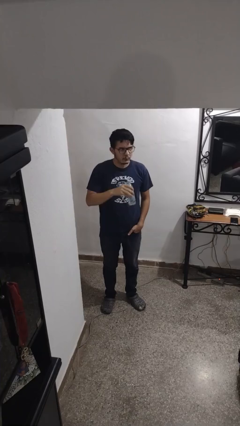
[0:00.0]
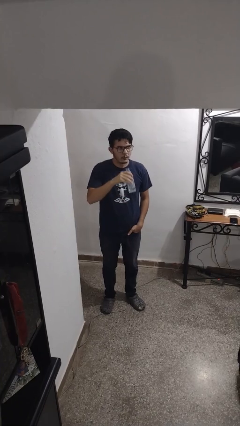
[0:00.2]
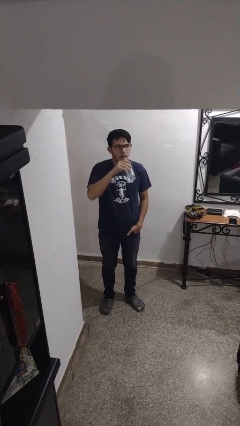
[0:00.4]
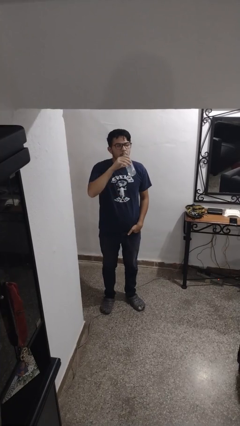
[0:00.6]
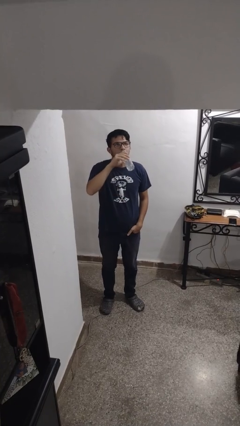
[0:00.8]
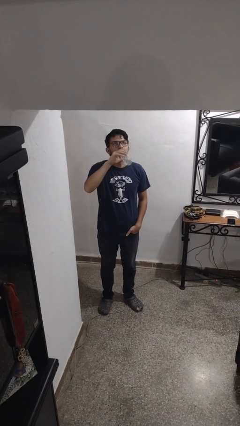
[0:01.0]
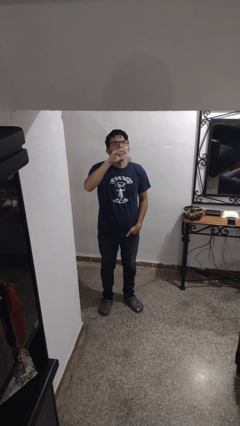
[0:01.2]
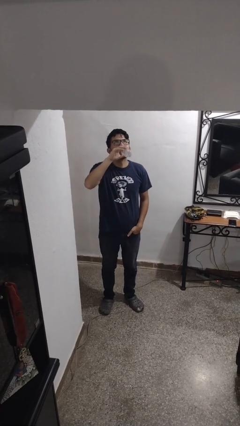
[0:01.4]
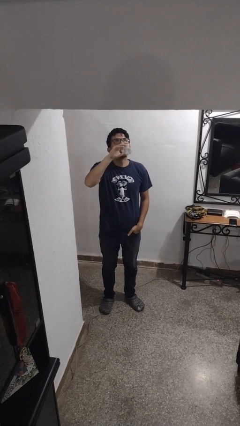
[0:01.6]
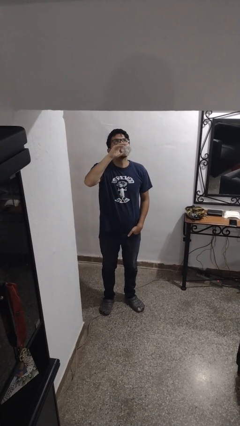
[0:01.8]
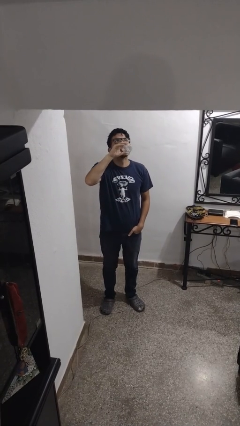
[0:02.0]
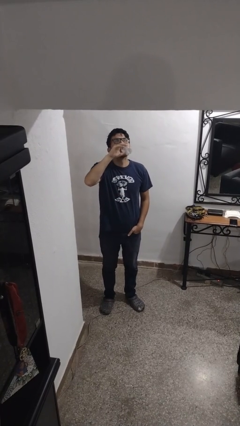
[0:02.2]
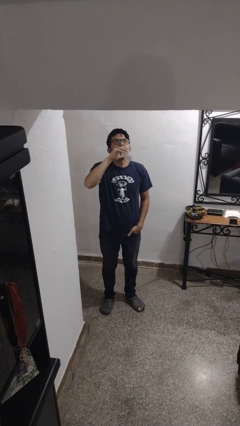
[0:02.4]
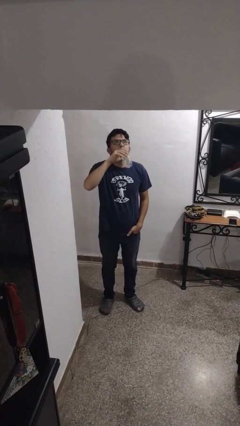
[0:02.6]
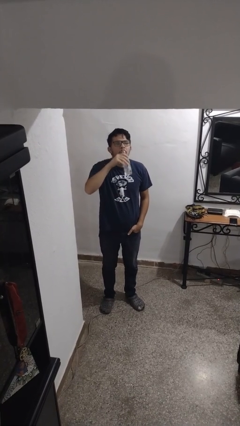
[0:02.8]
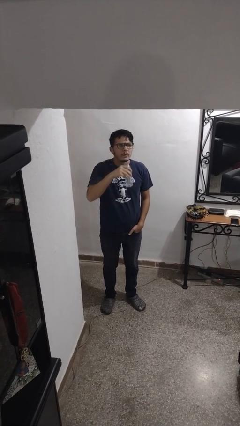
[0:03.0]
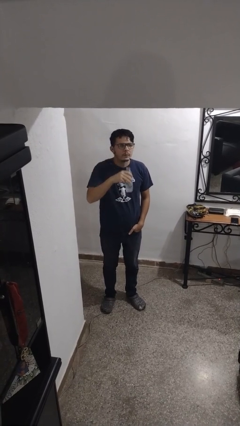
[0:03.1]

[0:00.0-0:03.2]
person drinks from bottle

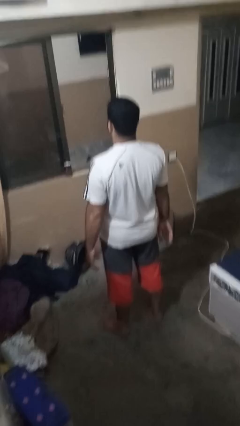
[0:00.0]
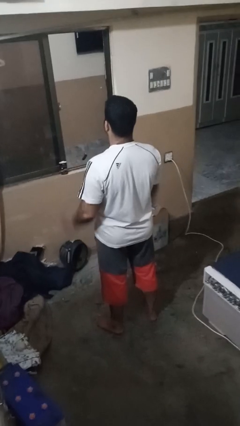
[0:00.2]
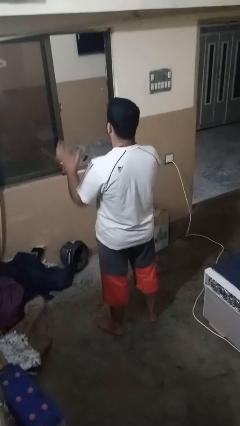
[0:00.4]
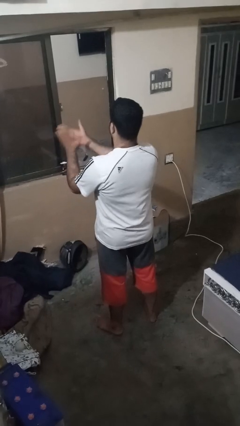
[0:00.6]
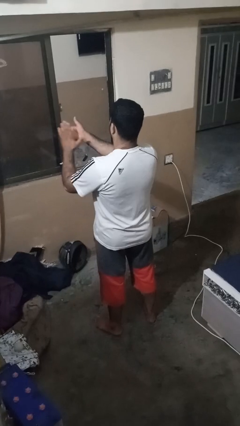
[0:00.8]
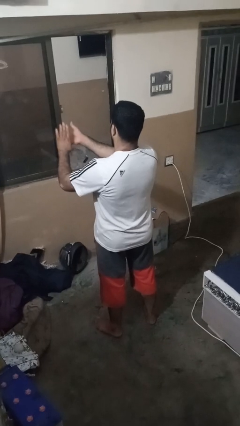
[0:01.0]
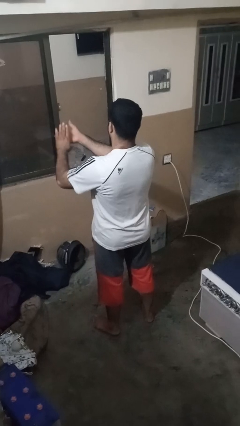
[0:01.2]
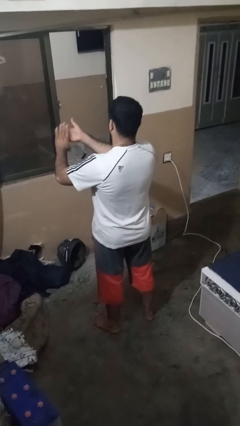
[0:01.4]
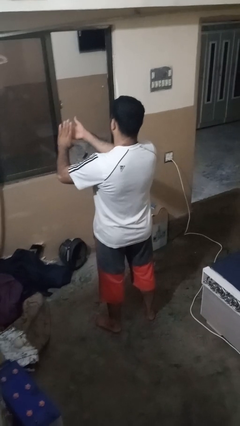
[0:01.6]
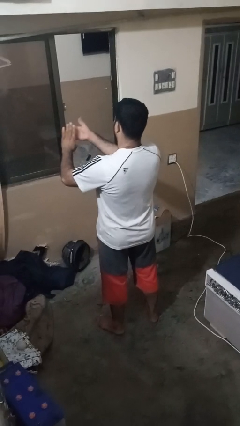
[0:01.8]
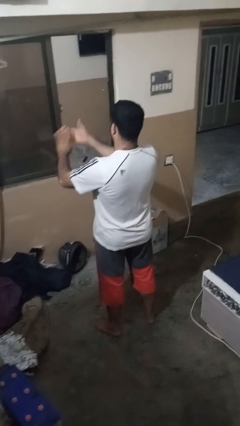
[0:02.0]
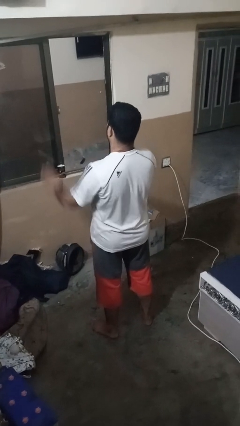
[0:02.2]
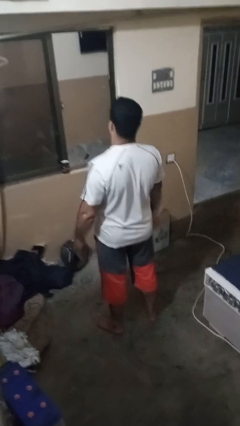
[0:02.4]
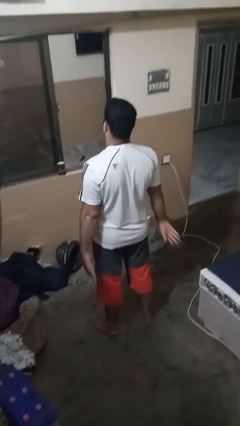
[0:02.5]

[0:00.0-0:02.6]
person claps hands

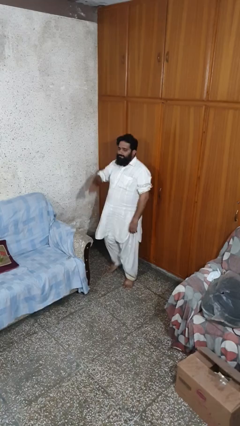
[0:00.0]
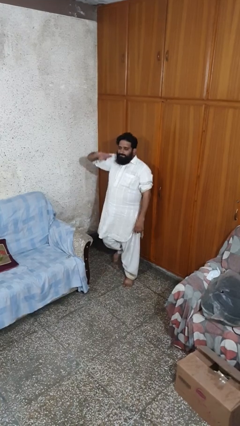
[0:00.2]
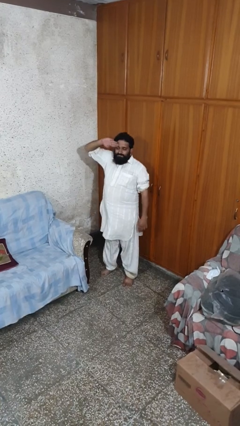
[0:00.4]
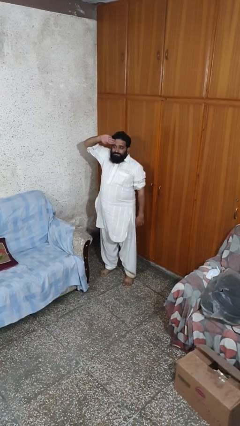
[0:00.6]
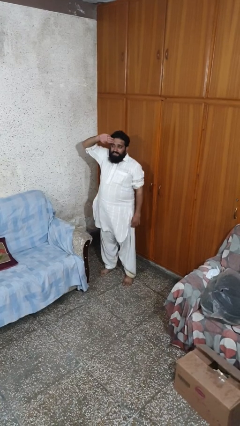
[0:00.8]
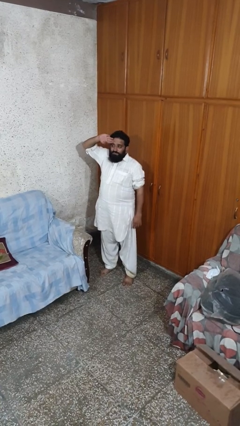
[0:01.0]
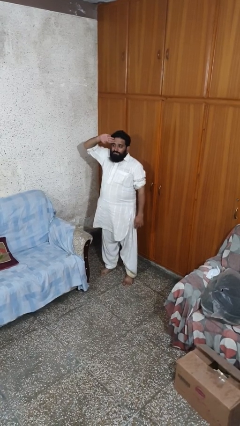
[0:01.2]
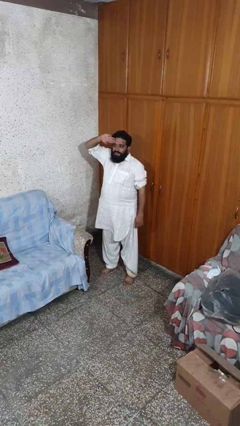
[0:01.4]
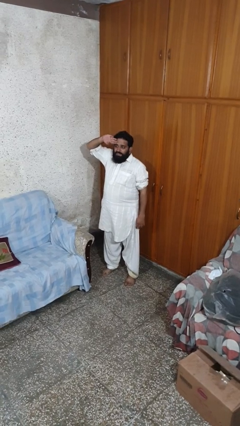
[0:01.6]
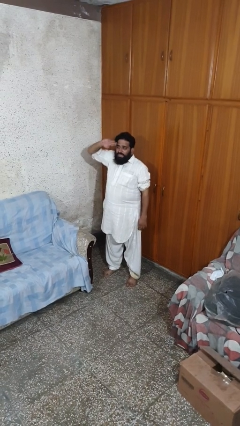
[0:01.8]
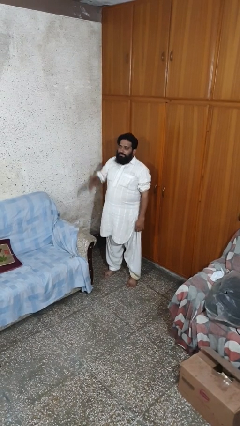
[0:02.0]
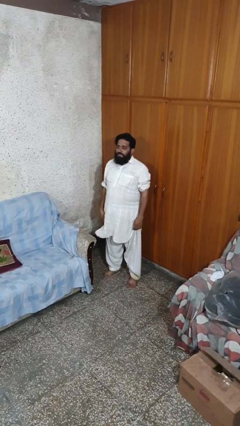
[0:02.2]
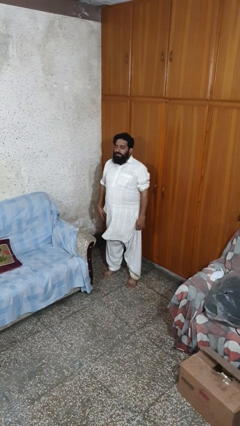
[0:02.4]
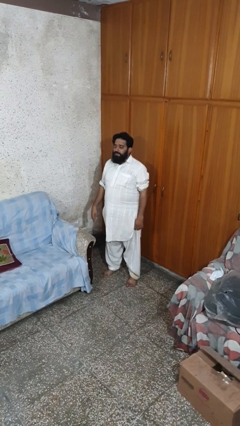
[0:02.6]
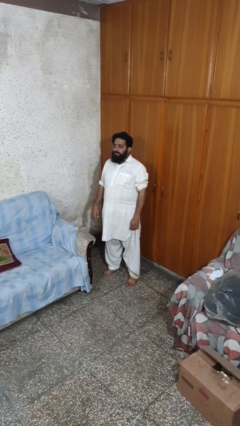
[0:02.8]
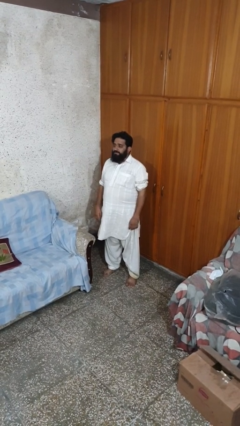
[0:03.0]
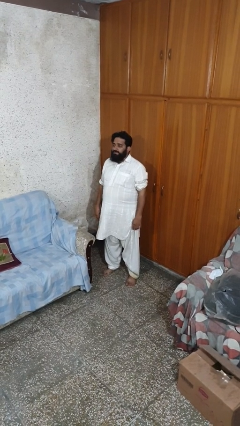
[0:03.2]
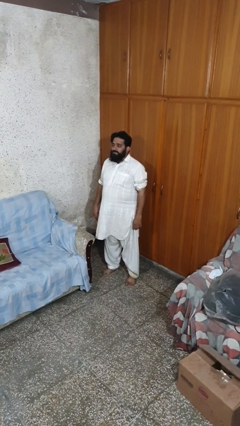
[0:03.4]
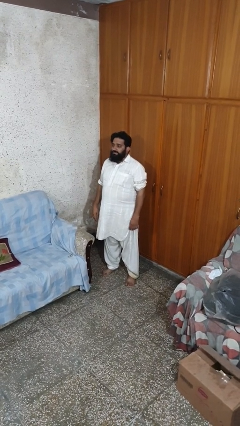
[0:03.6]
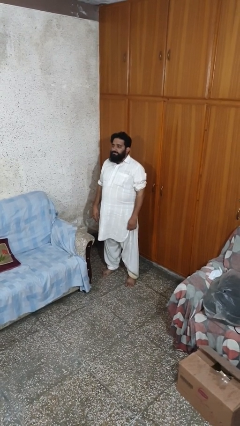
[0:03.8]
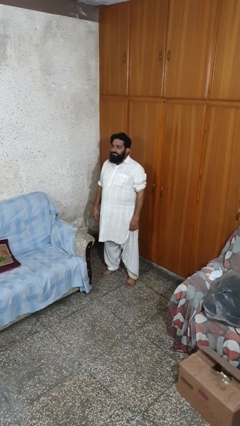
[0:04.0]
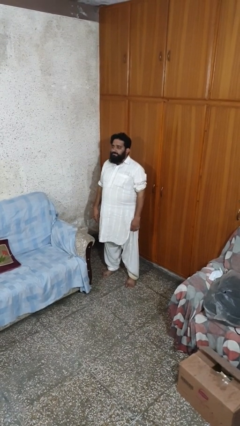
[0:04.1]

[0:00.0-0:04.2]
person salutes

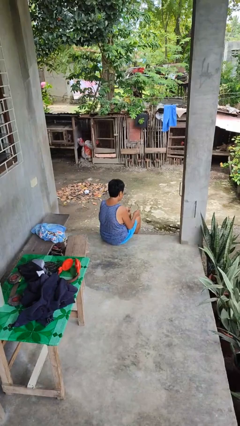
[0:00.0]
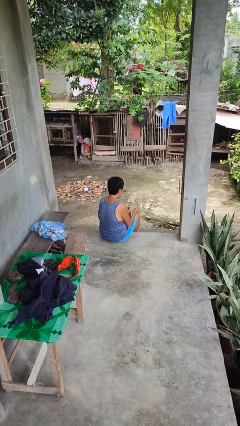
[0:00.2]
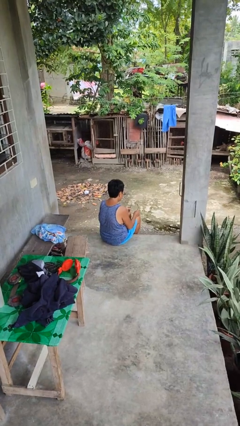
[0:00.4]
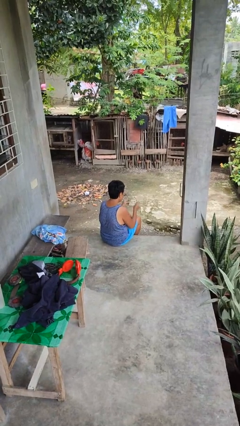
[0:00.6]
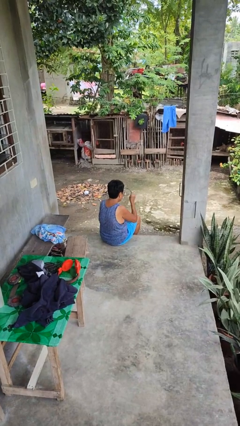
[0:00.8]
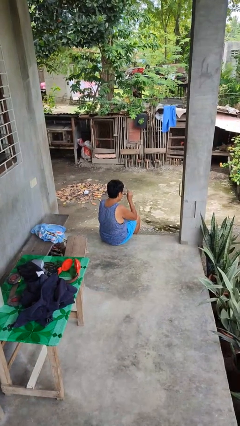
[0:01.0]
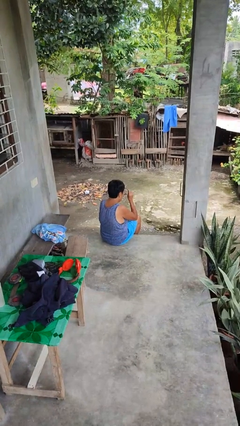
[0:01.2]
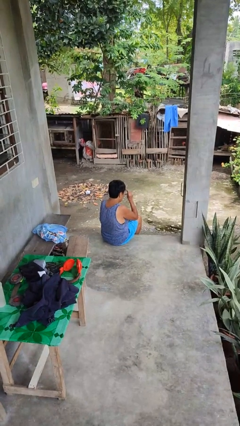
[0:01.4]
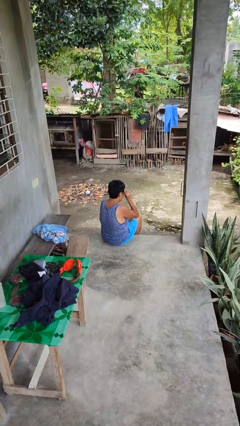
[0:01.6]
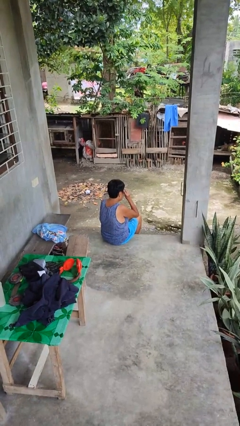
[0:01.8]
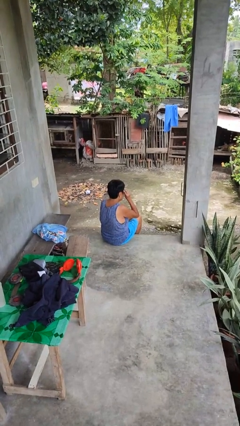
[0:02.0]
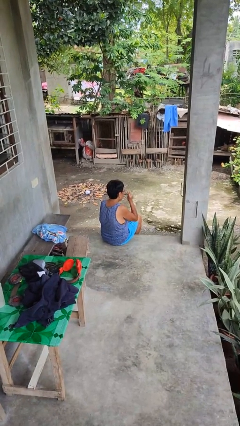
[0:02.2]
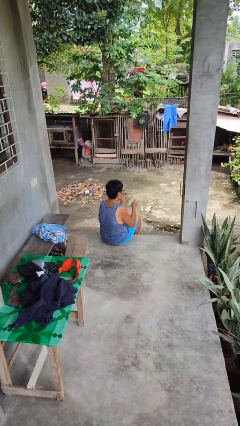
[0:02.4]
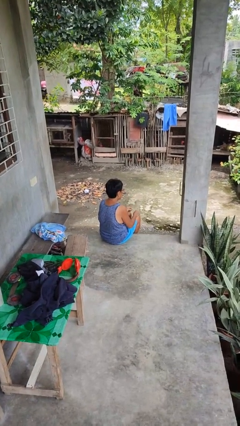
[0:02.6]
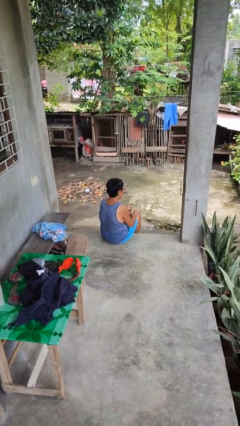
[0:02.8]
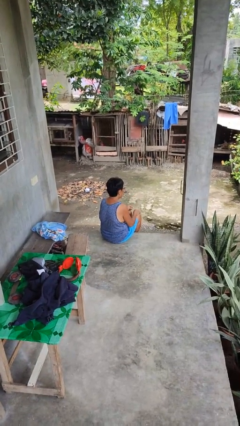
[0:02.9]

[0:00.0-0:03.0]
person puts on glasses

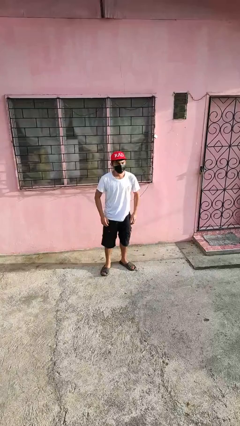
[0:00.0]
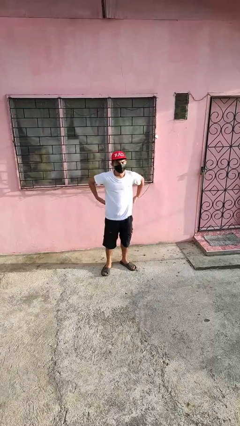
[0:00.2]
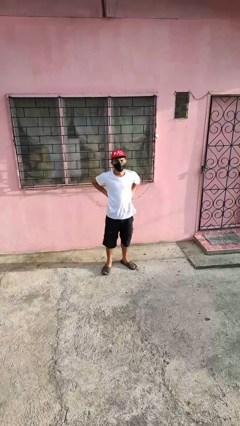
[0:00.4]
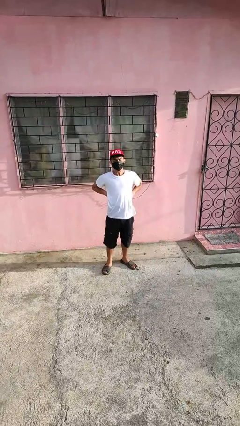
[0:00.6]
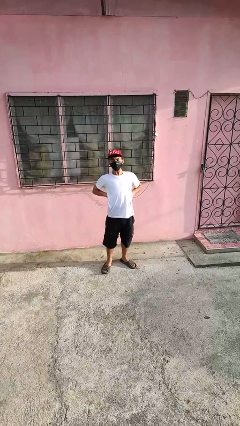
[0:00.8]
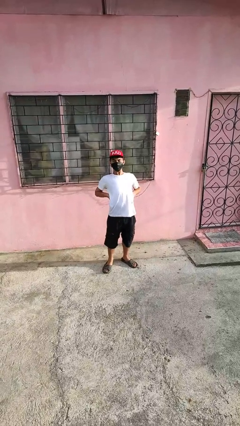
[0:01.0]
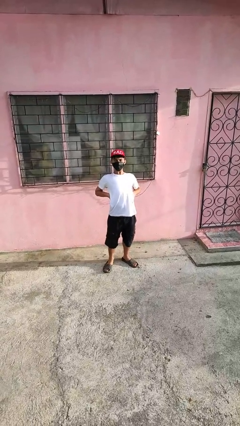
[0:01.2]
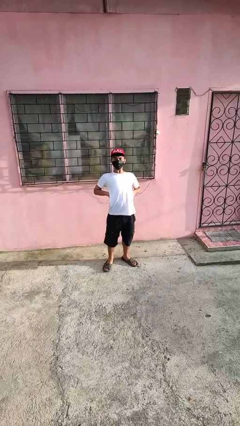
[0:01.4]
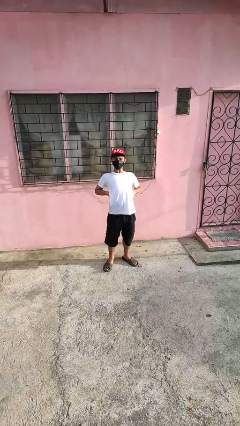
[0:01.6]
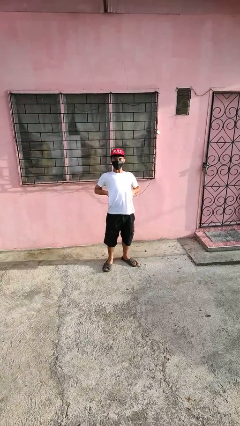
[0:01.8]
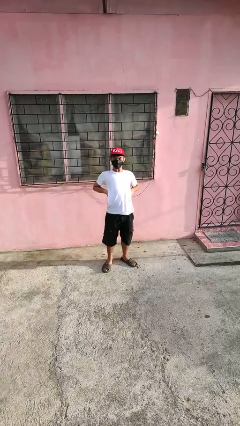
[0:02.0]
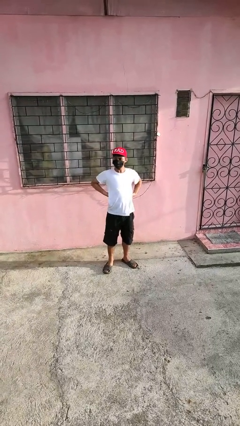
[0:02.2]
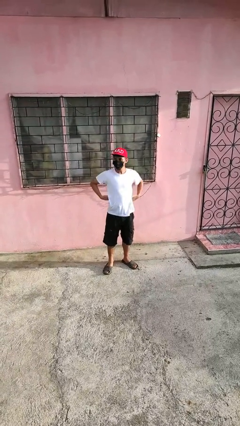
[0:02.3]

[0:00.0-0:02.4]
person stretches back

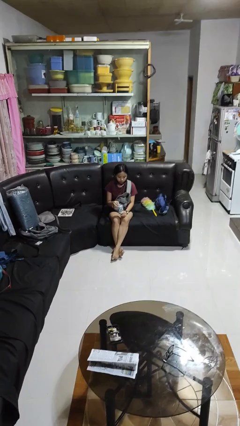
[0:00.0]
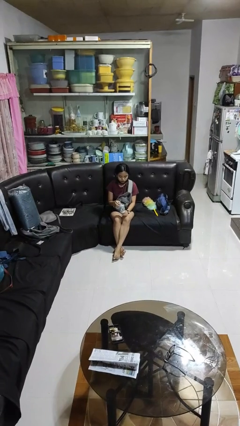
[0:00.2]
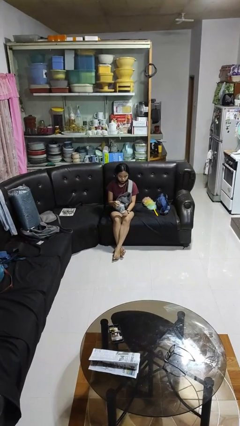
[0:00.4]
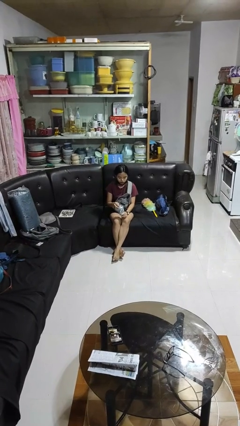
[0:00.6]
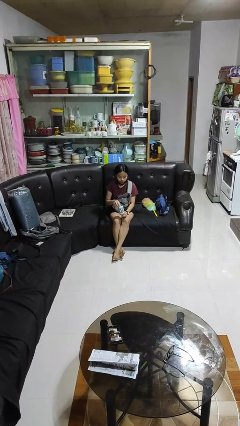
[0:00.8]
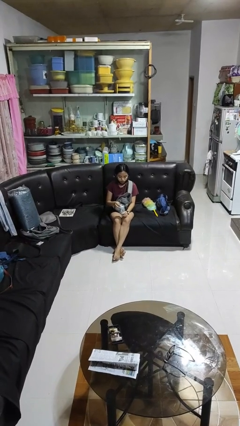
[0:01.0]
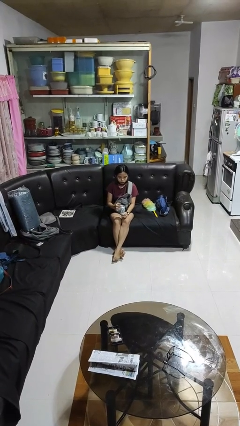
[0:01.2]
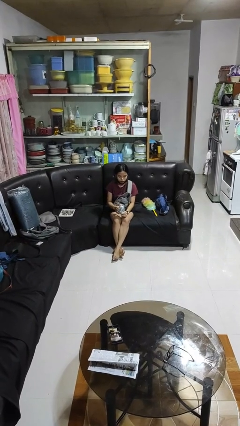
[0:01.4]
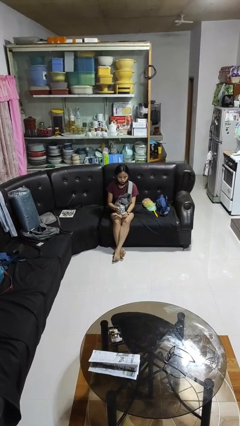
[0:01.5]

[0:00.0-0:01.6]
person opens beverage can
